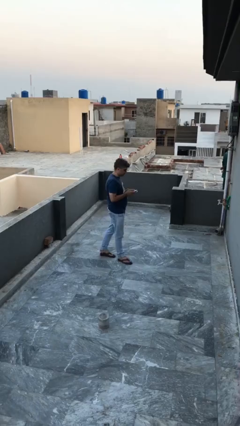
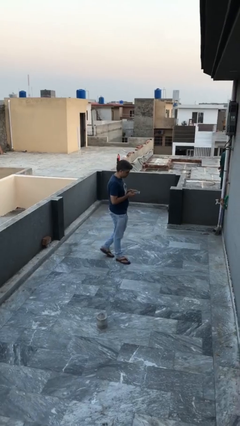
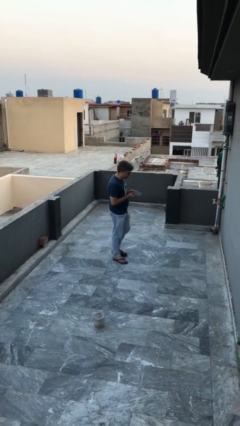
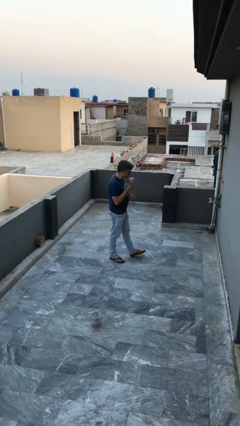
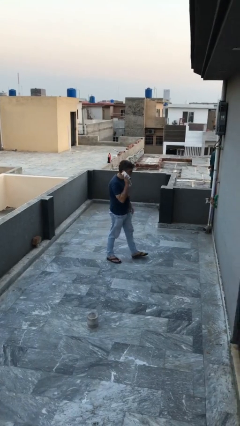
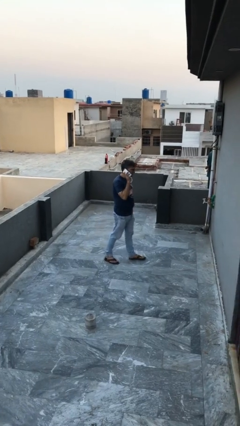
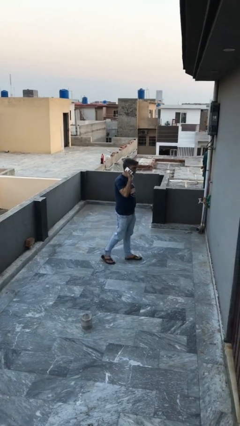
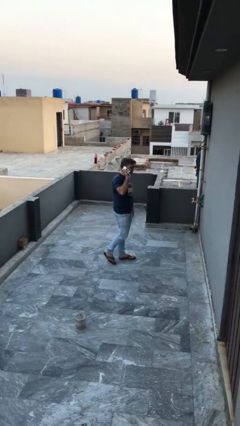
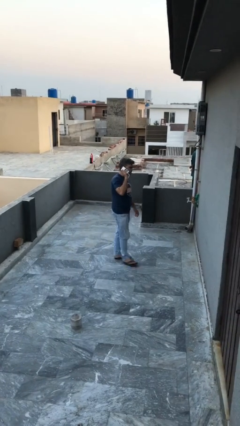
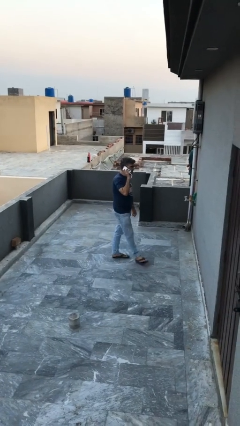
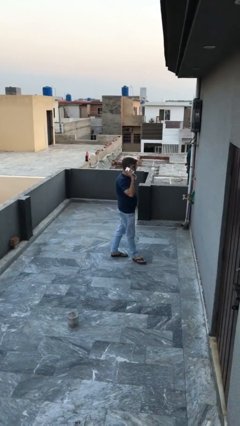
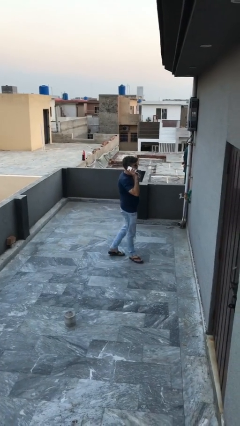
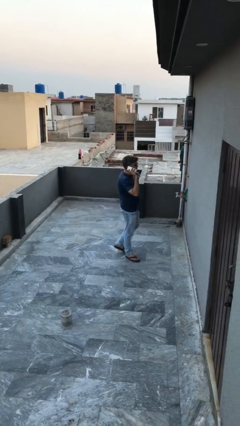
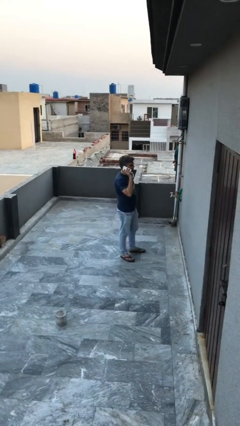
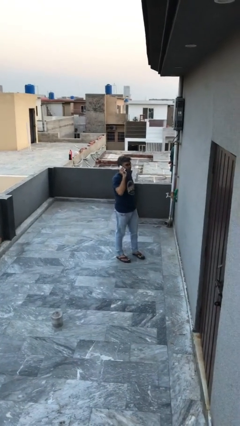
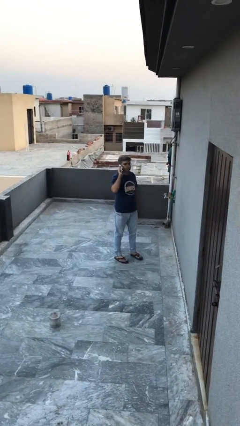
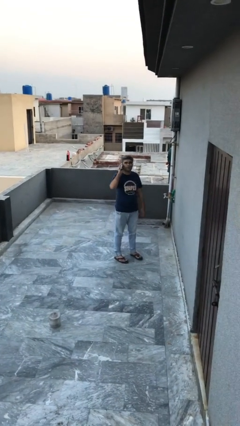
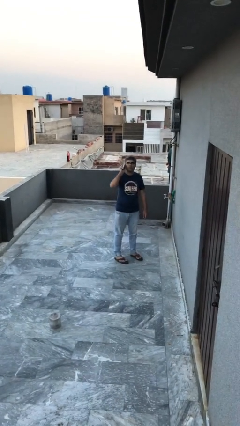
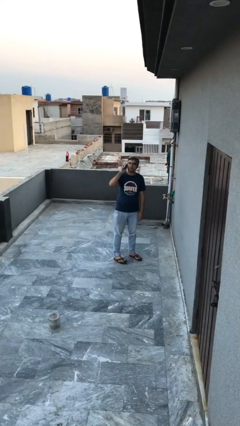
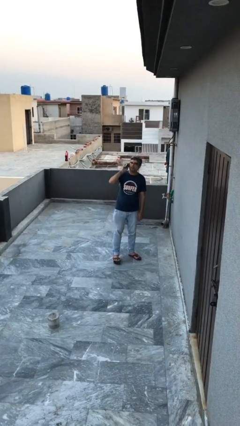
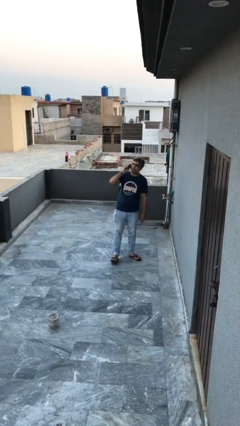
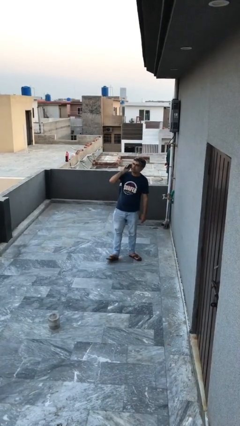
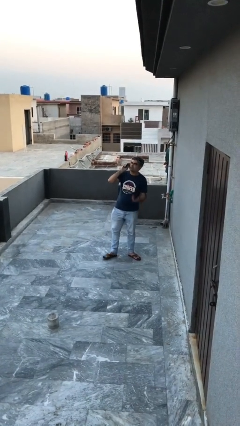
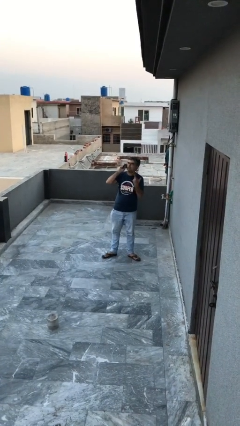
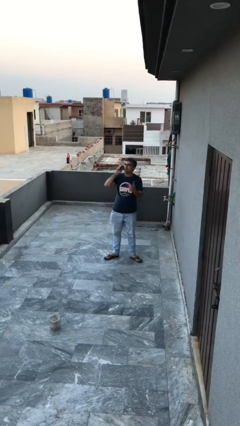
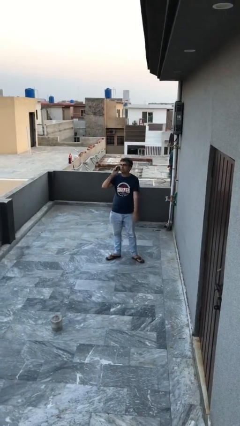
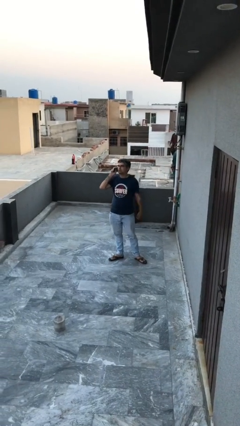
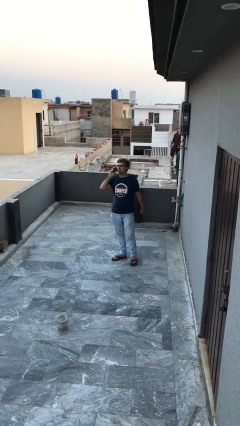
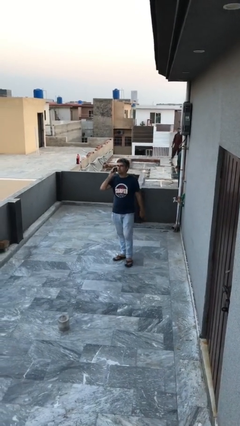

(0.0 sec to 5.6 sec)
person talks on phone

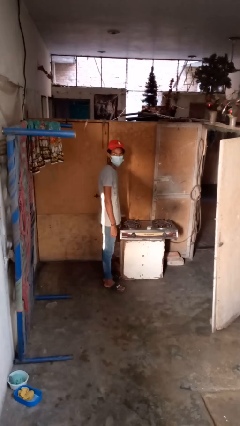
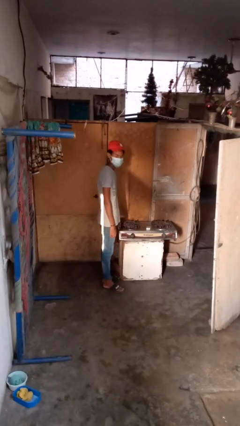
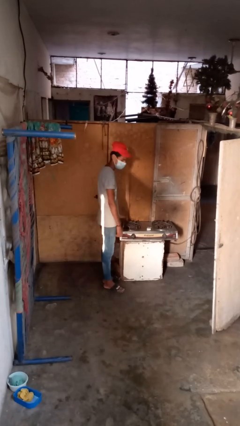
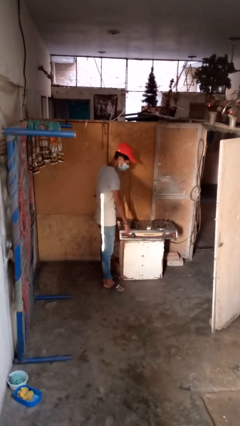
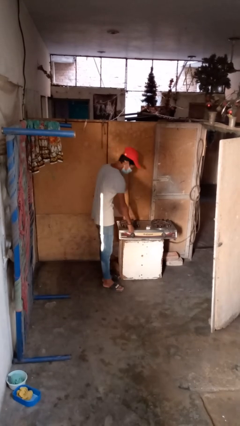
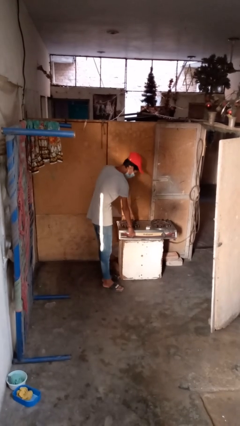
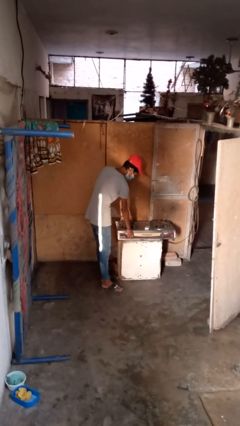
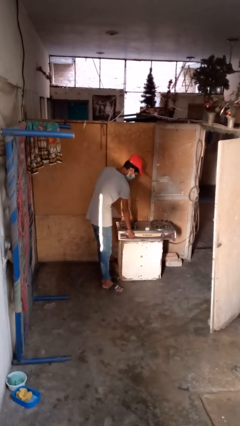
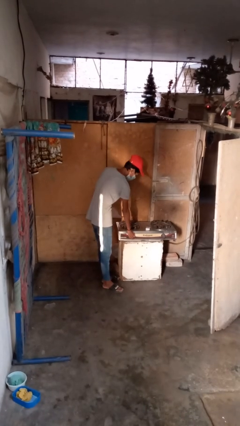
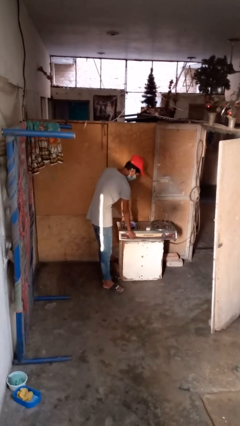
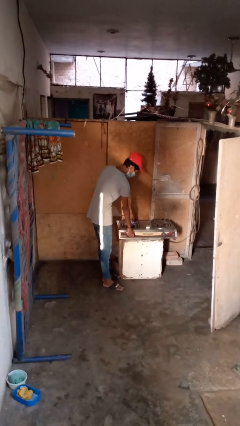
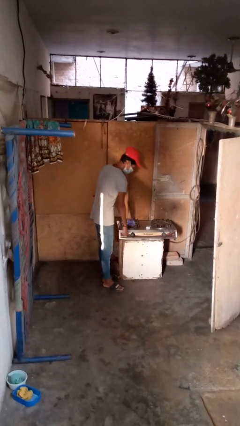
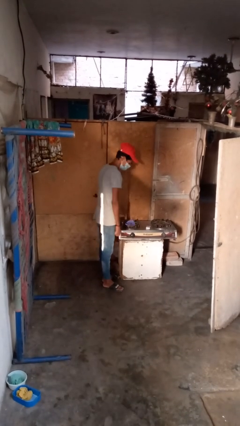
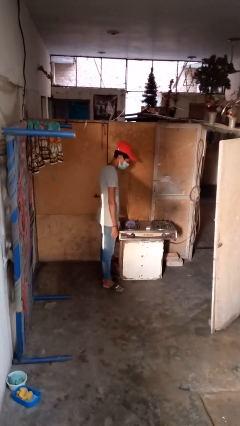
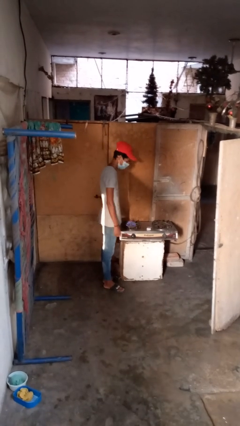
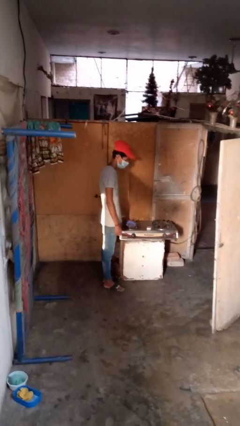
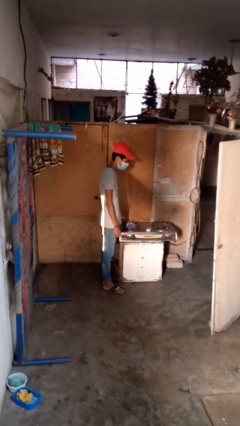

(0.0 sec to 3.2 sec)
person turns on stovetop

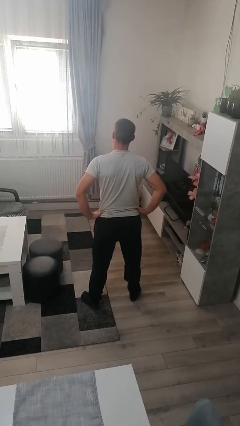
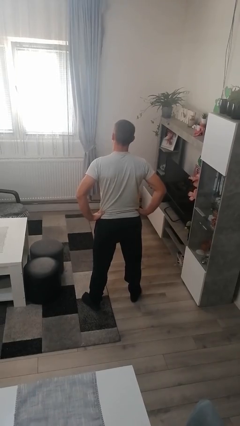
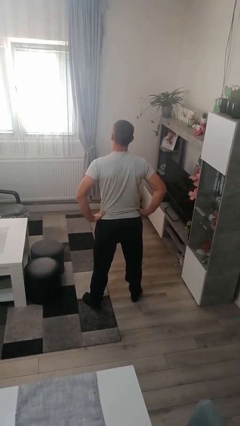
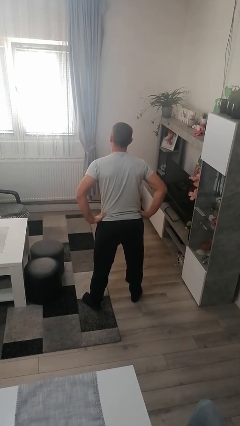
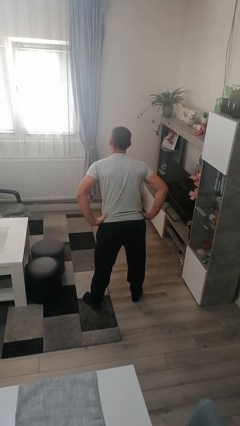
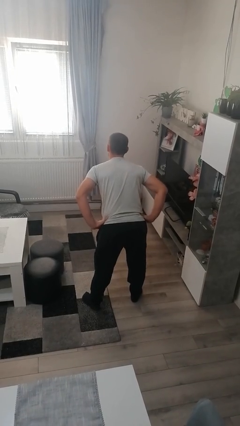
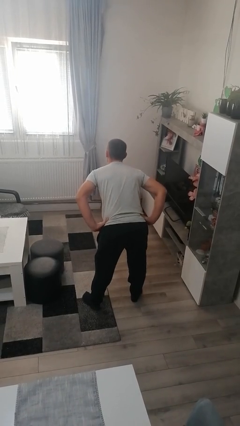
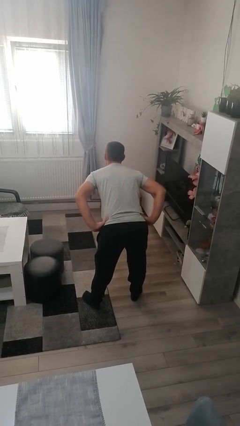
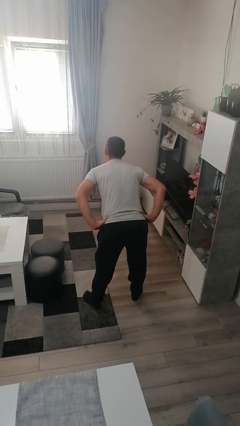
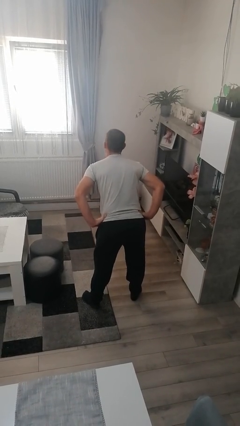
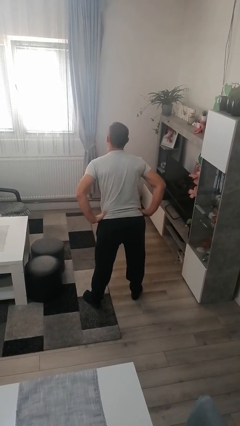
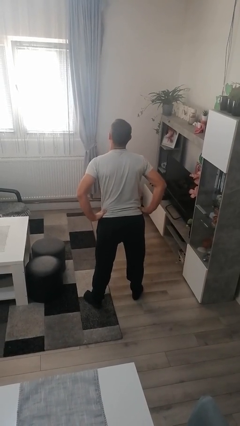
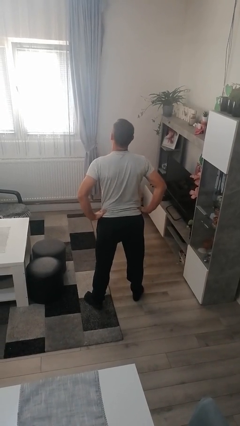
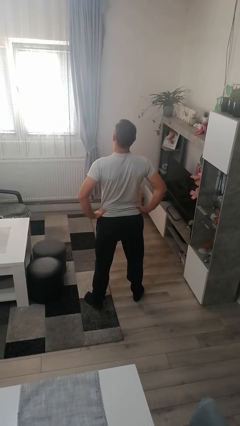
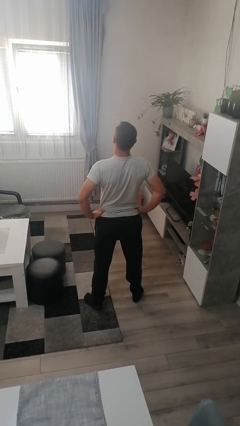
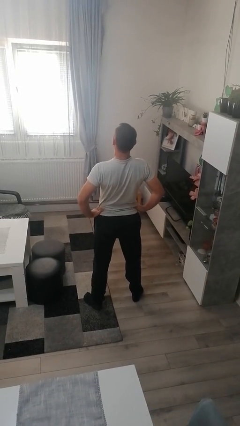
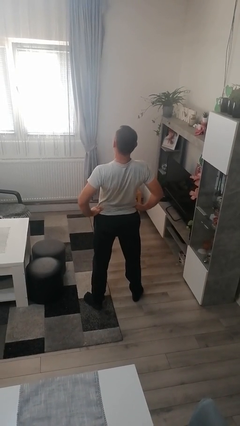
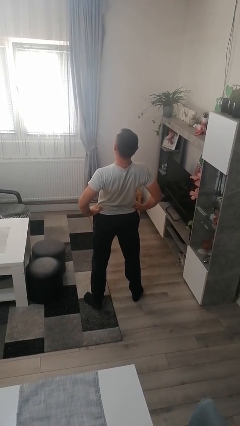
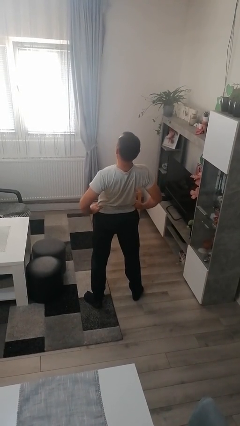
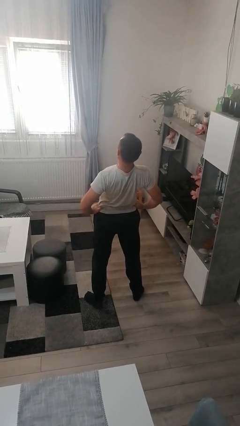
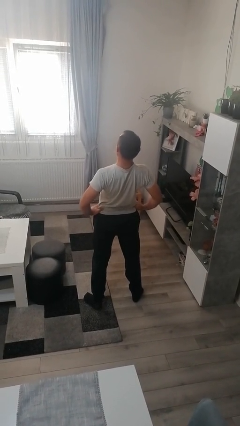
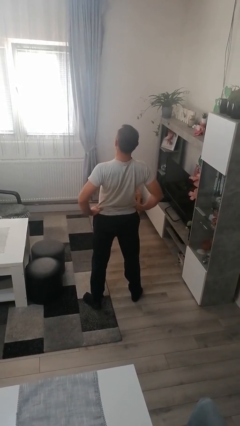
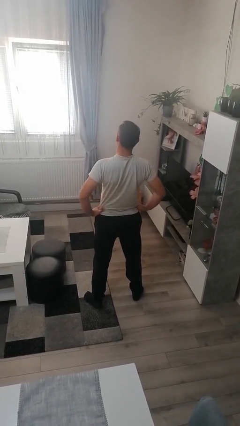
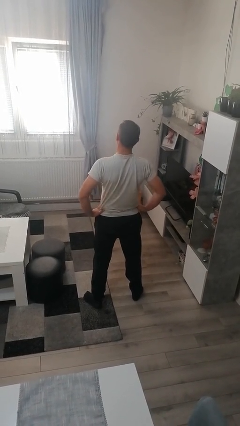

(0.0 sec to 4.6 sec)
person wiggles hips

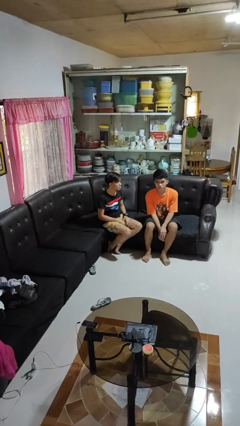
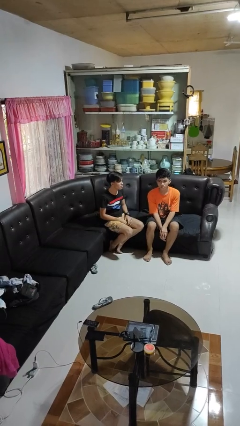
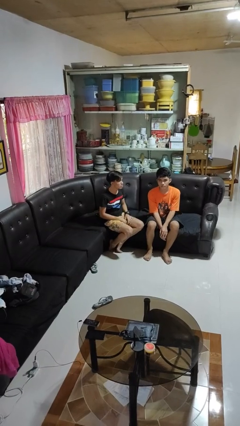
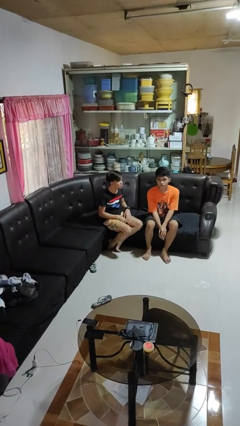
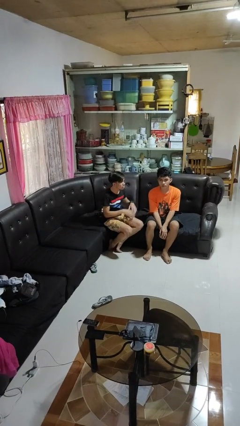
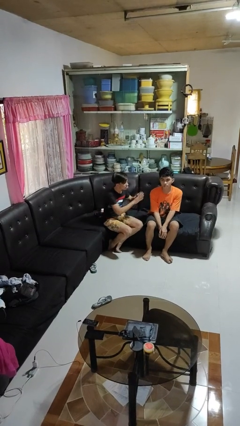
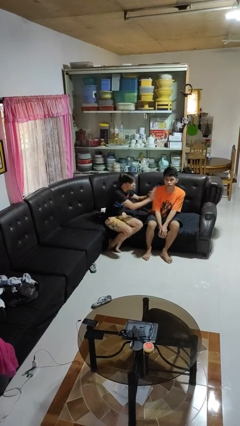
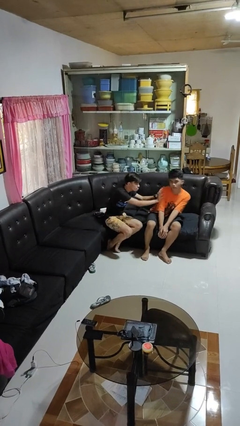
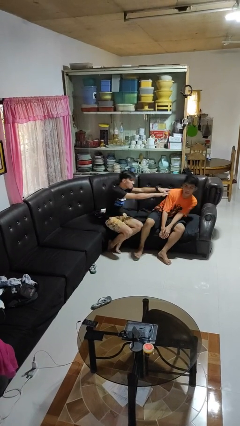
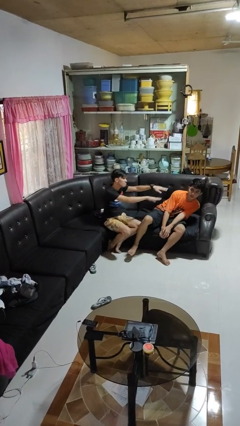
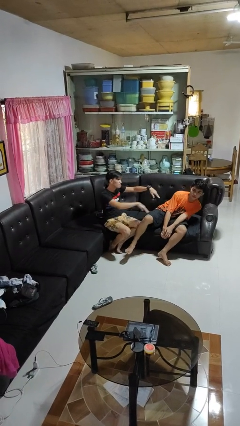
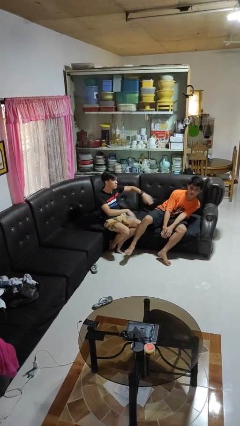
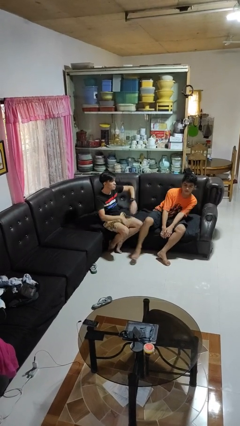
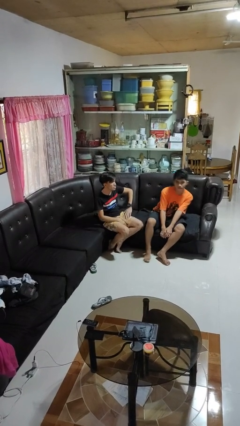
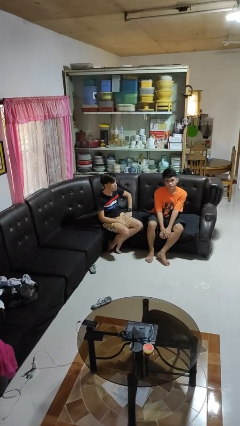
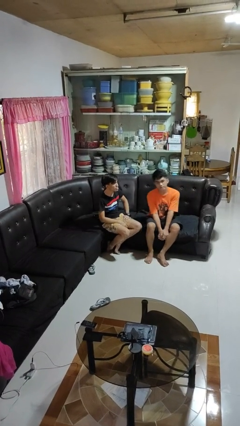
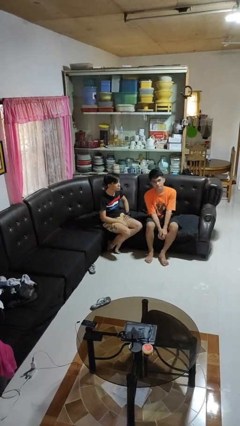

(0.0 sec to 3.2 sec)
person shoves person

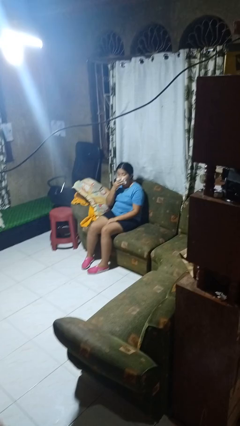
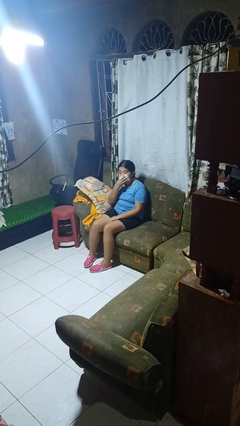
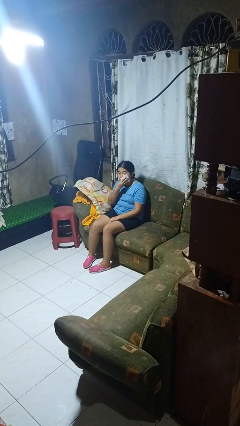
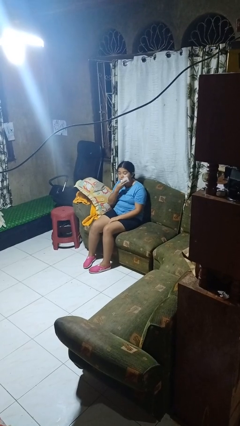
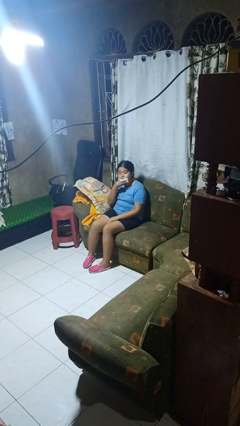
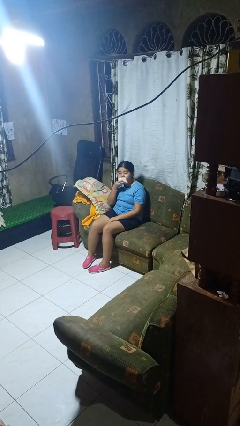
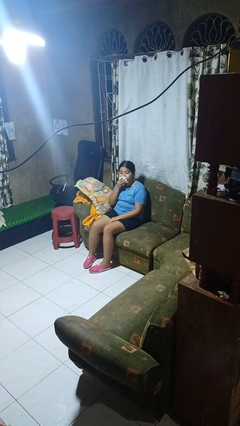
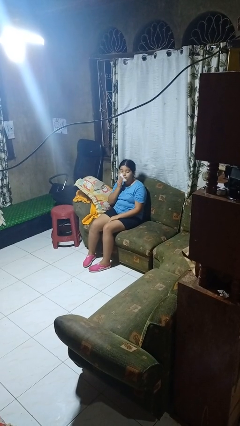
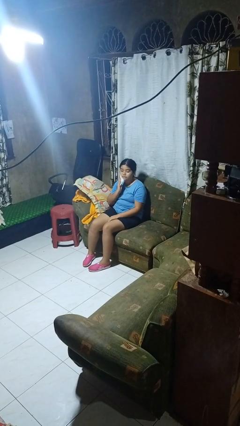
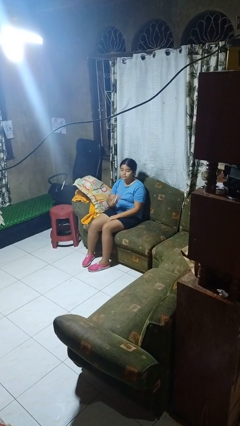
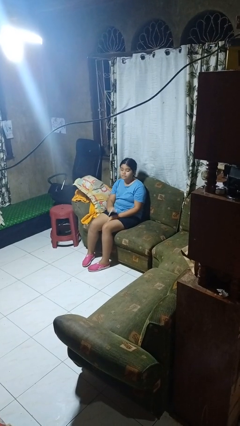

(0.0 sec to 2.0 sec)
person wipes mouth with napkin
